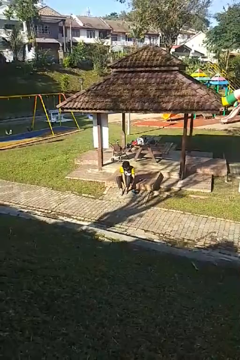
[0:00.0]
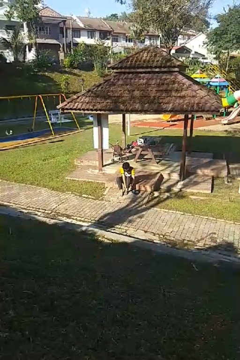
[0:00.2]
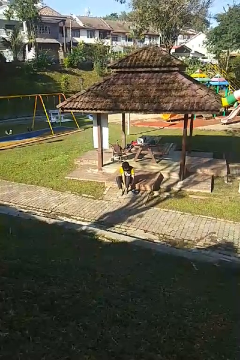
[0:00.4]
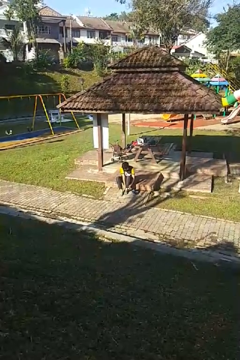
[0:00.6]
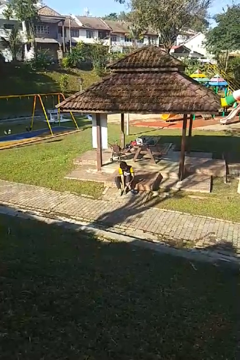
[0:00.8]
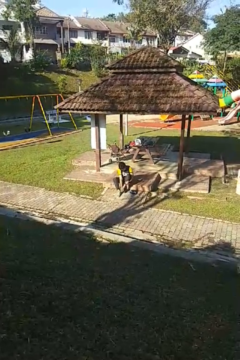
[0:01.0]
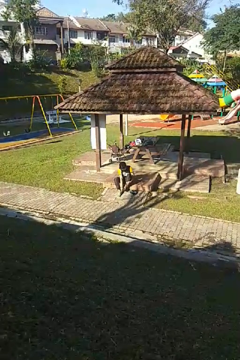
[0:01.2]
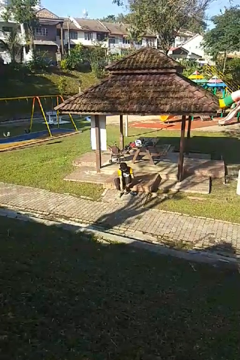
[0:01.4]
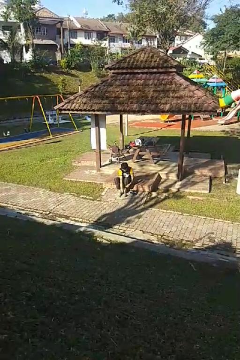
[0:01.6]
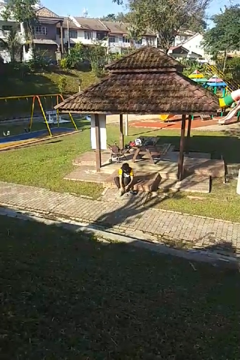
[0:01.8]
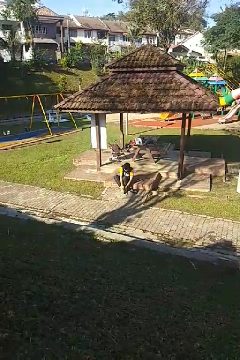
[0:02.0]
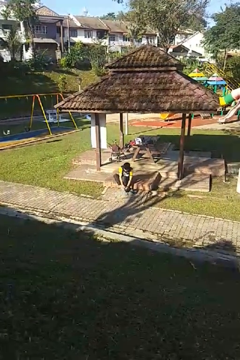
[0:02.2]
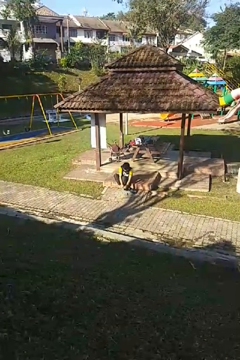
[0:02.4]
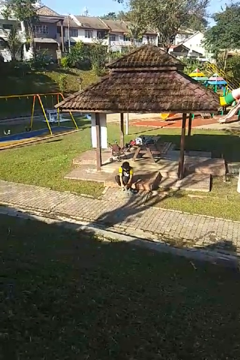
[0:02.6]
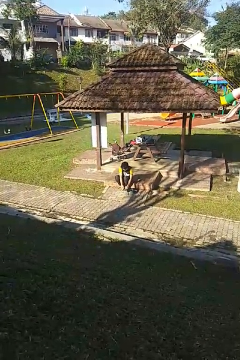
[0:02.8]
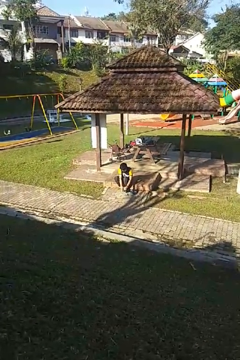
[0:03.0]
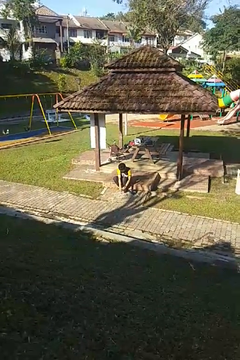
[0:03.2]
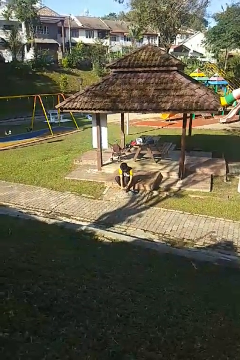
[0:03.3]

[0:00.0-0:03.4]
person takes off socks

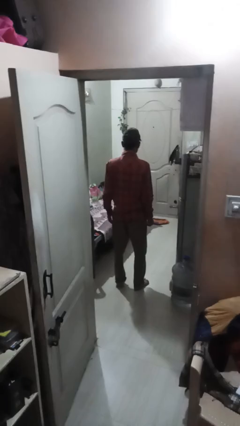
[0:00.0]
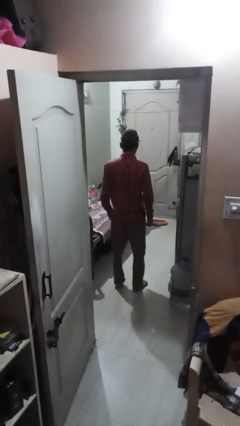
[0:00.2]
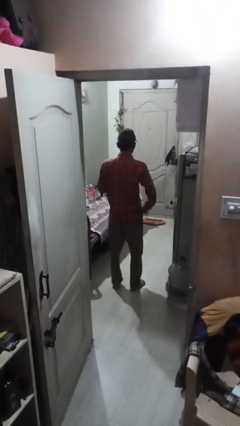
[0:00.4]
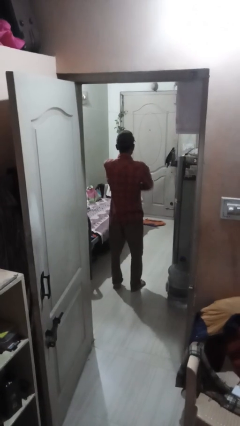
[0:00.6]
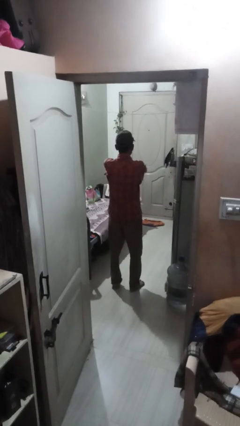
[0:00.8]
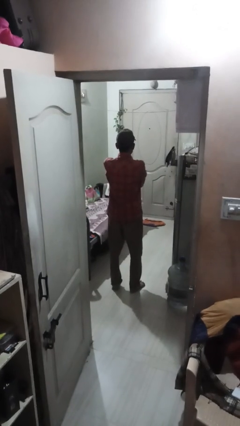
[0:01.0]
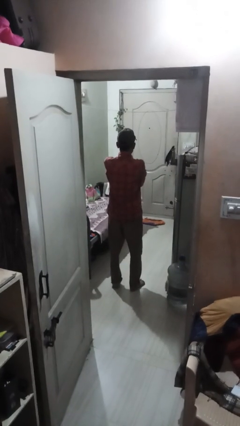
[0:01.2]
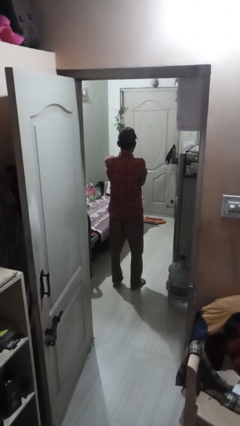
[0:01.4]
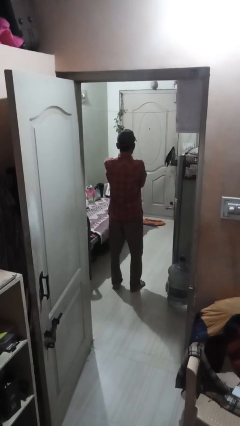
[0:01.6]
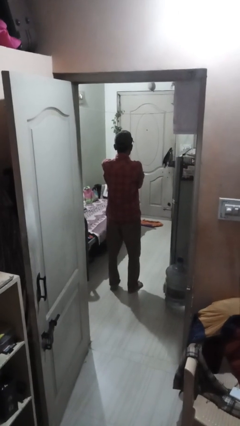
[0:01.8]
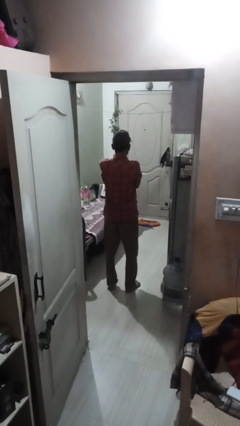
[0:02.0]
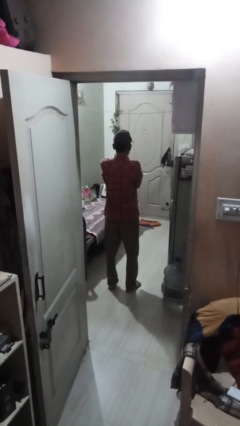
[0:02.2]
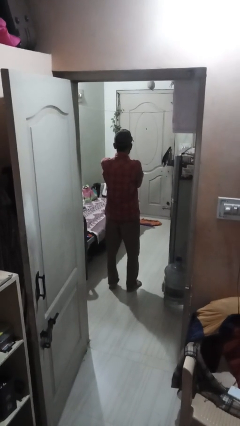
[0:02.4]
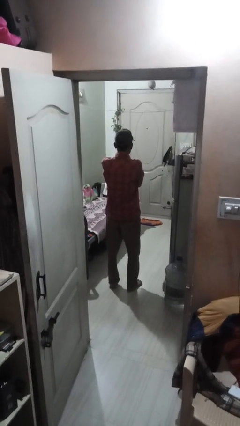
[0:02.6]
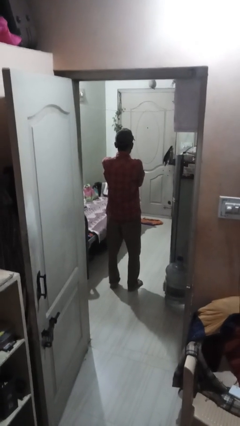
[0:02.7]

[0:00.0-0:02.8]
person crosses arms

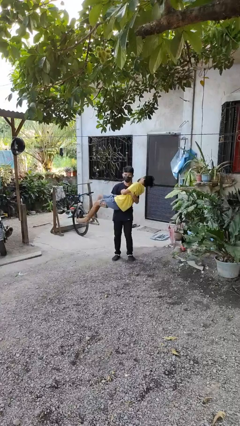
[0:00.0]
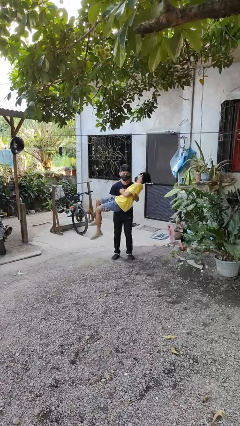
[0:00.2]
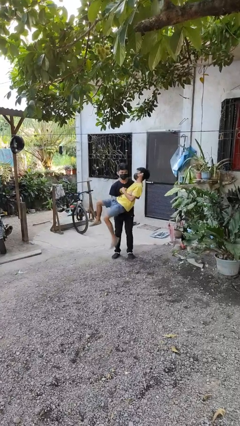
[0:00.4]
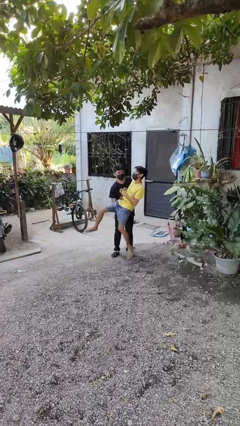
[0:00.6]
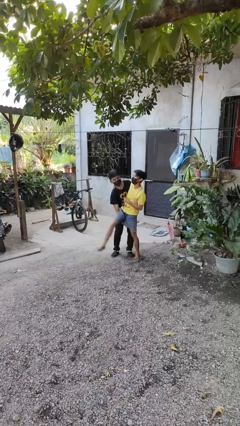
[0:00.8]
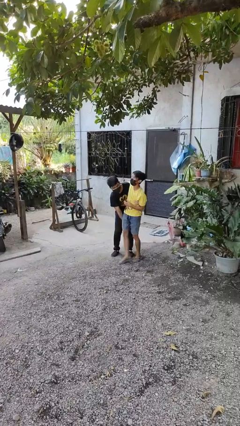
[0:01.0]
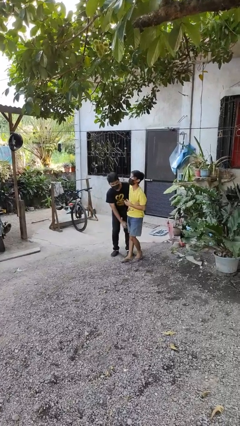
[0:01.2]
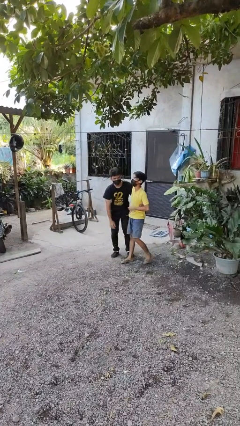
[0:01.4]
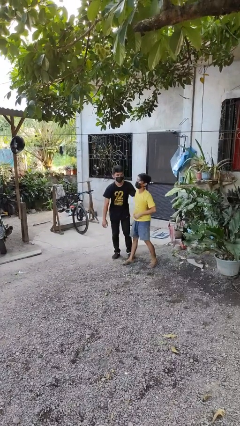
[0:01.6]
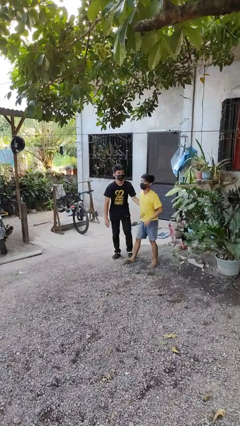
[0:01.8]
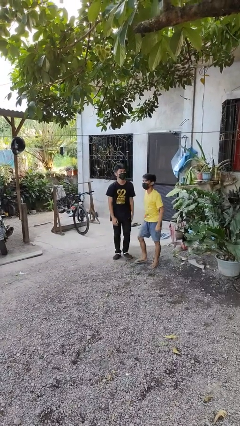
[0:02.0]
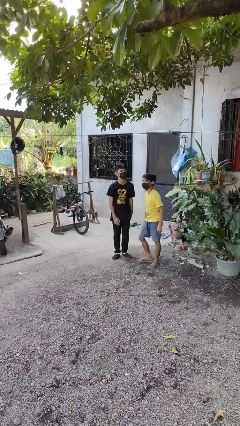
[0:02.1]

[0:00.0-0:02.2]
person puts down person

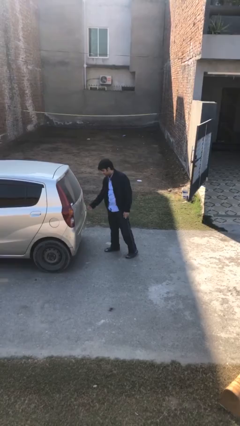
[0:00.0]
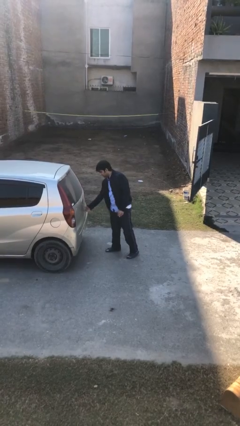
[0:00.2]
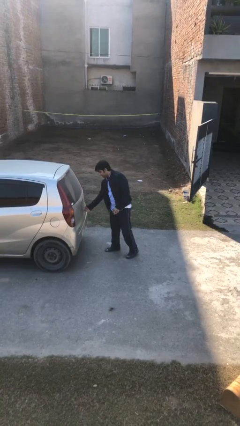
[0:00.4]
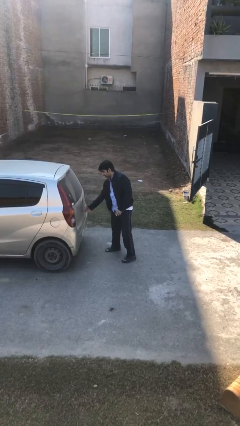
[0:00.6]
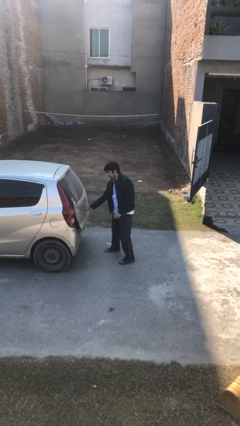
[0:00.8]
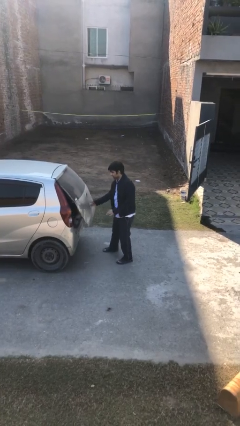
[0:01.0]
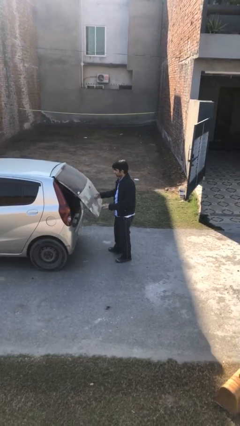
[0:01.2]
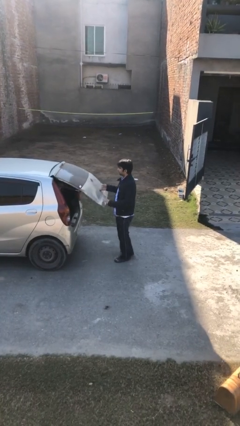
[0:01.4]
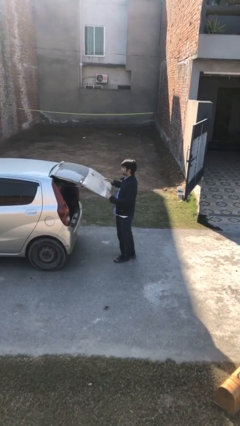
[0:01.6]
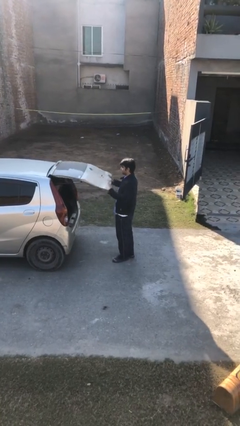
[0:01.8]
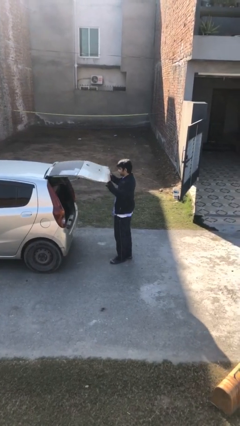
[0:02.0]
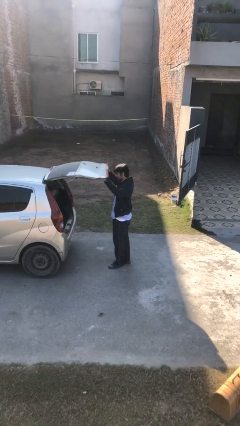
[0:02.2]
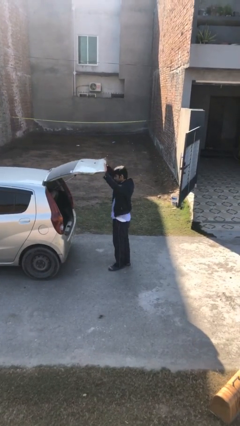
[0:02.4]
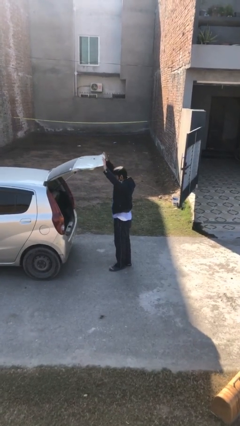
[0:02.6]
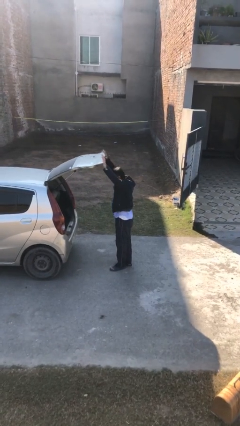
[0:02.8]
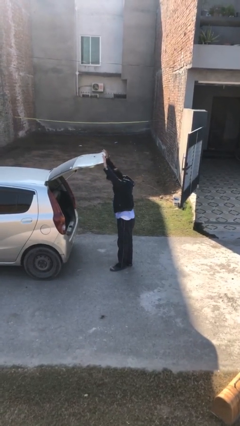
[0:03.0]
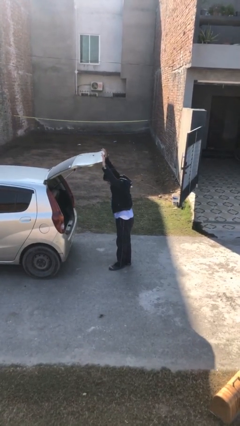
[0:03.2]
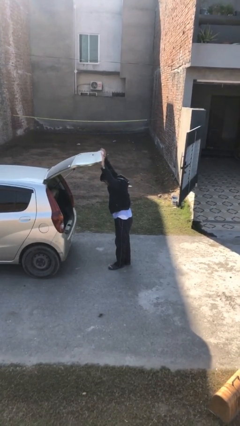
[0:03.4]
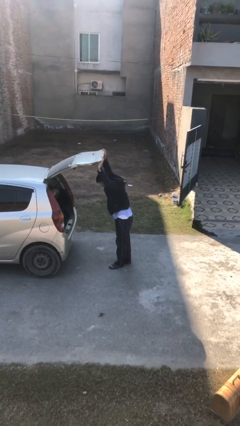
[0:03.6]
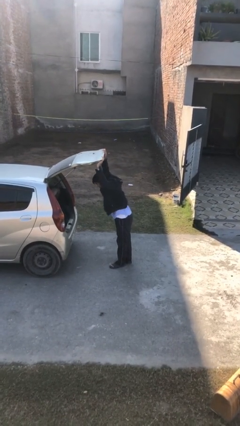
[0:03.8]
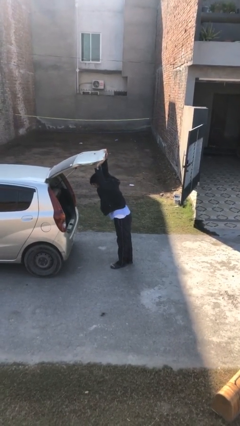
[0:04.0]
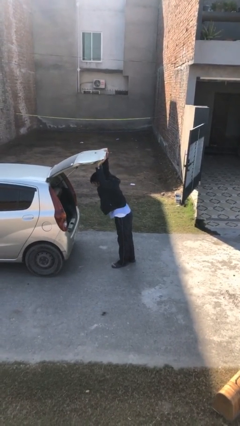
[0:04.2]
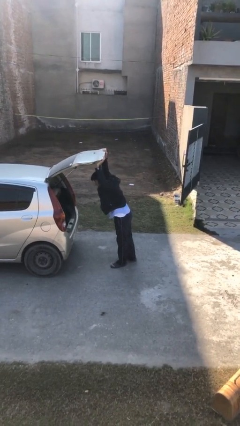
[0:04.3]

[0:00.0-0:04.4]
person opens car trunk

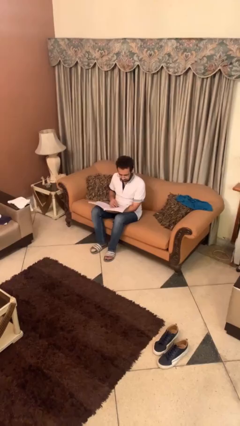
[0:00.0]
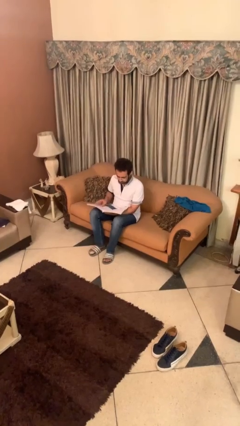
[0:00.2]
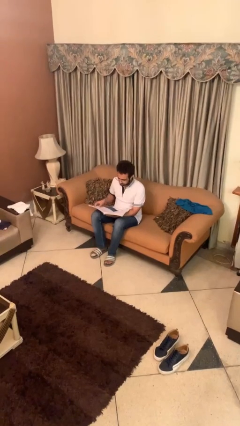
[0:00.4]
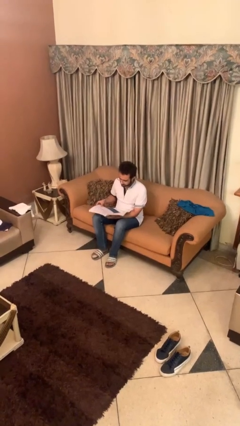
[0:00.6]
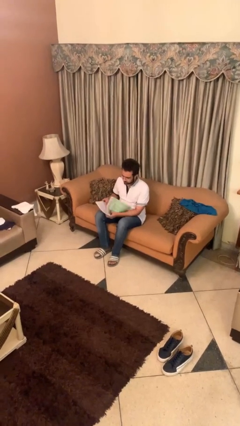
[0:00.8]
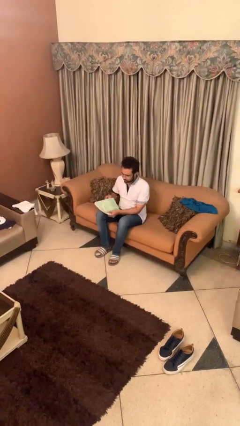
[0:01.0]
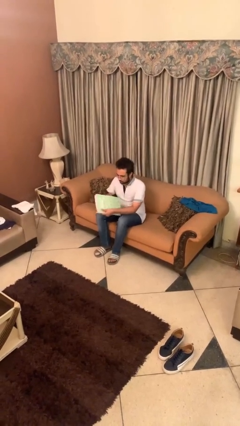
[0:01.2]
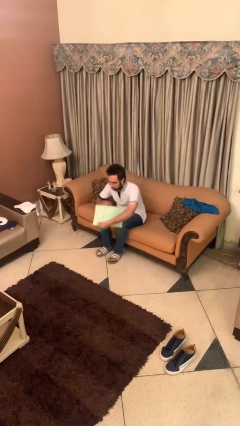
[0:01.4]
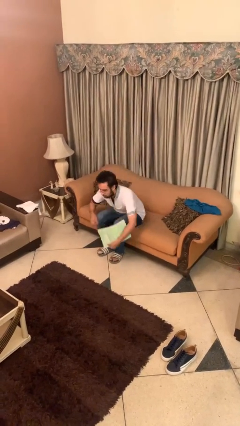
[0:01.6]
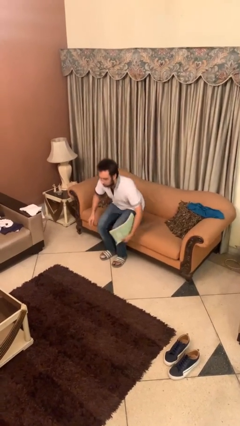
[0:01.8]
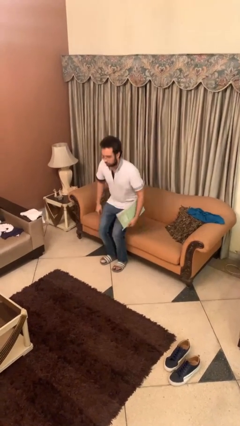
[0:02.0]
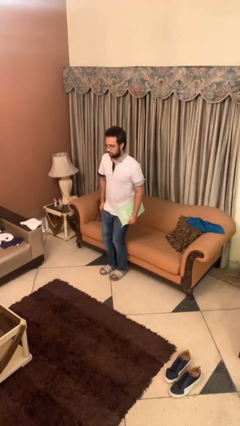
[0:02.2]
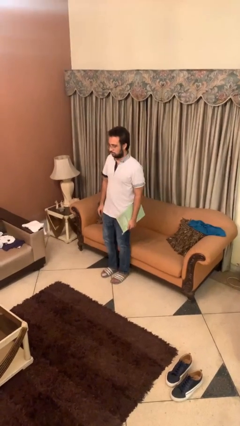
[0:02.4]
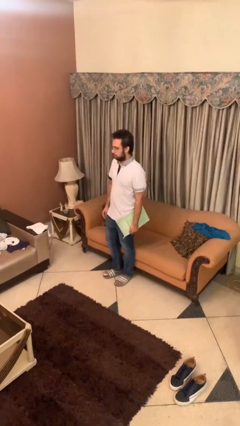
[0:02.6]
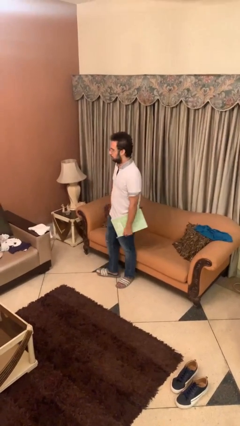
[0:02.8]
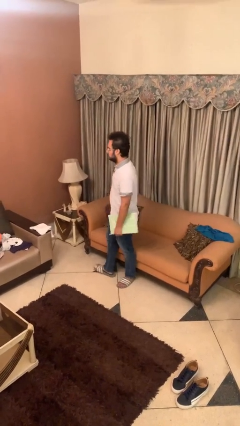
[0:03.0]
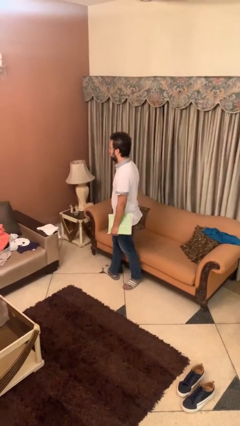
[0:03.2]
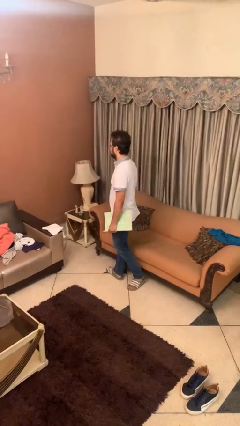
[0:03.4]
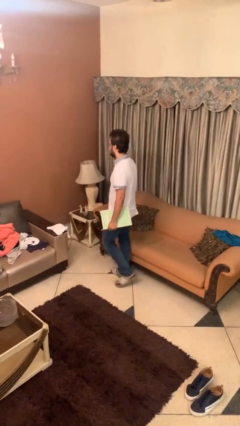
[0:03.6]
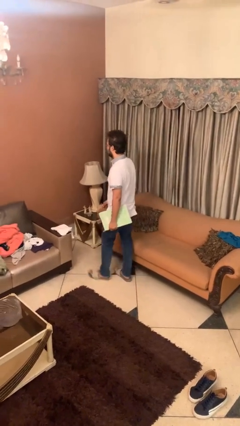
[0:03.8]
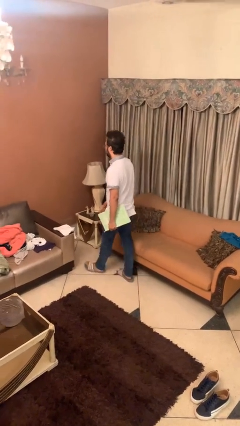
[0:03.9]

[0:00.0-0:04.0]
person stands up

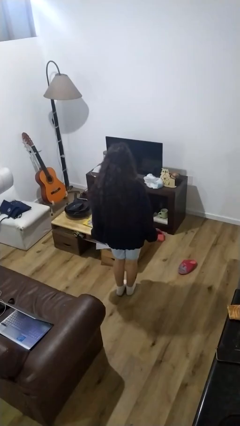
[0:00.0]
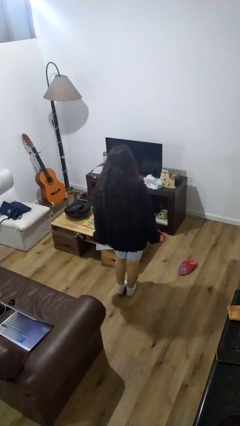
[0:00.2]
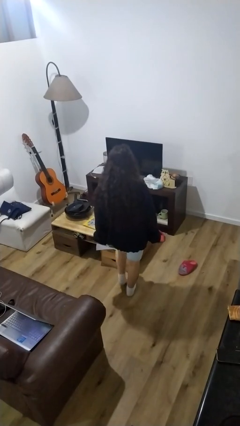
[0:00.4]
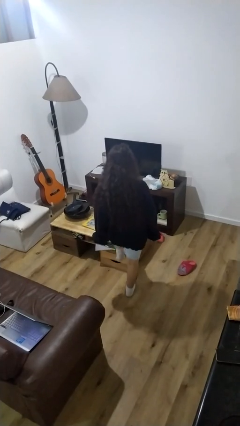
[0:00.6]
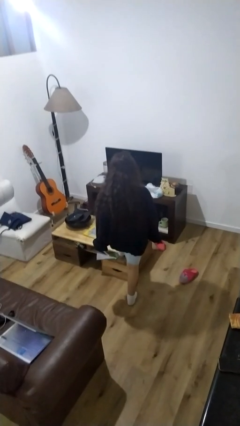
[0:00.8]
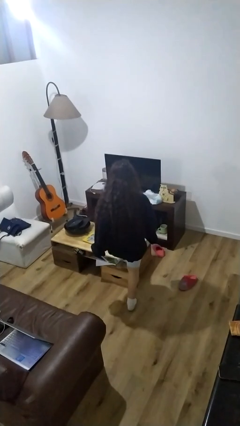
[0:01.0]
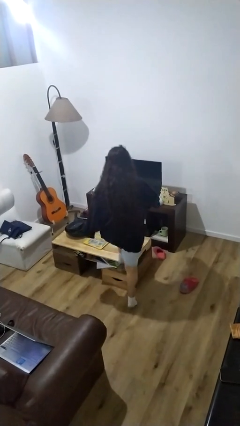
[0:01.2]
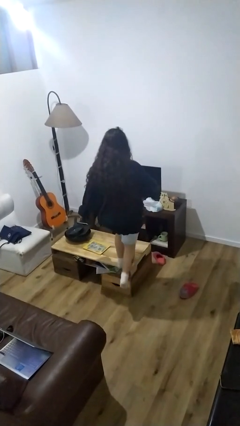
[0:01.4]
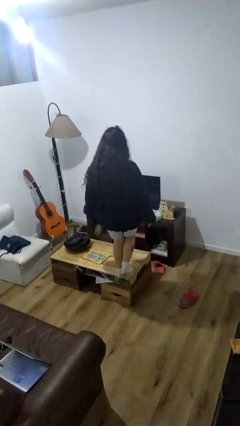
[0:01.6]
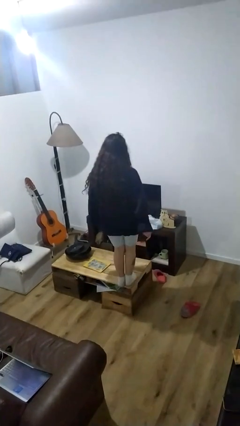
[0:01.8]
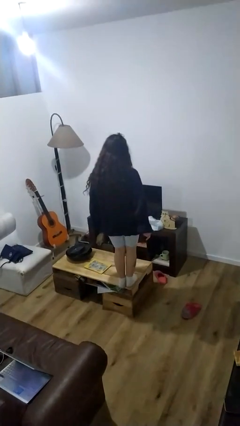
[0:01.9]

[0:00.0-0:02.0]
person climbs on table
